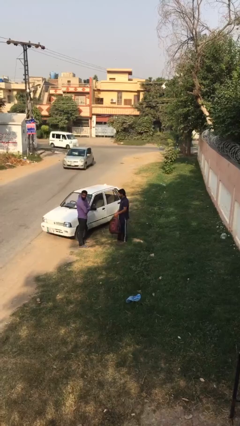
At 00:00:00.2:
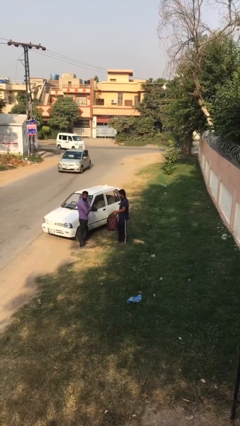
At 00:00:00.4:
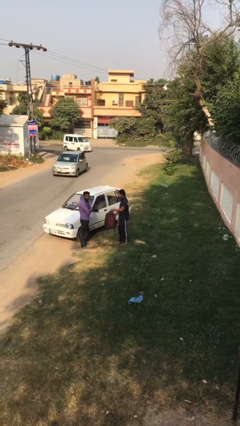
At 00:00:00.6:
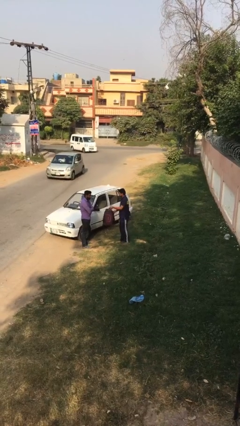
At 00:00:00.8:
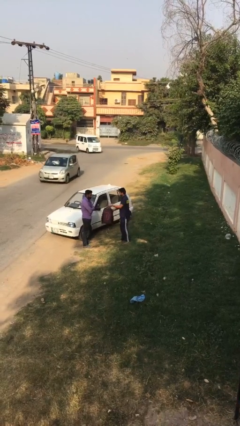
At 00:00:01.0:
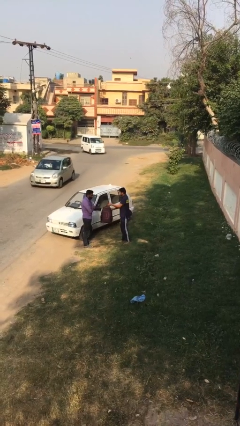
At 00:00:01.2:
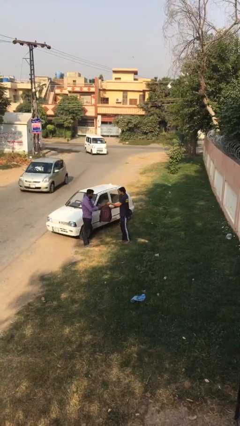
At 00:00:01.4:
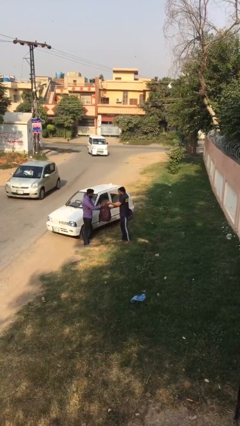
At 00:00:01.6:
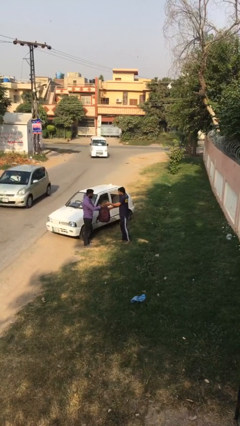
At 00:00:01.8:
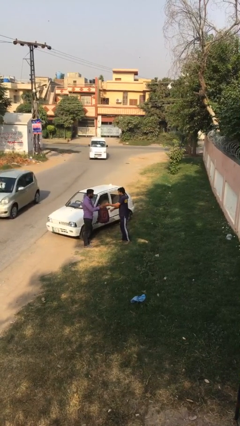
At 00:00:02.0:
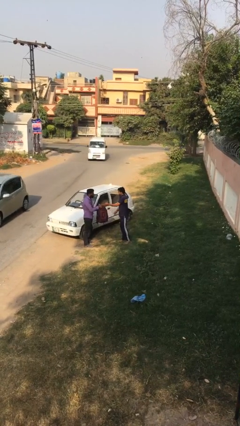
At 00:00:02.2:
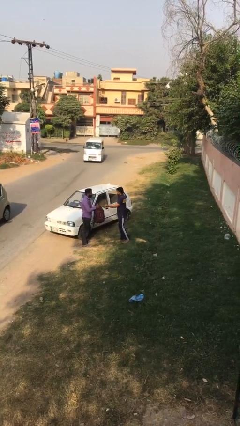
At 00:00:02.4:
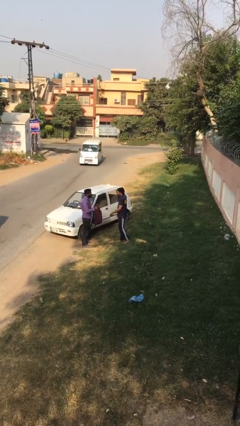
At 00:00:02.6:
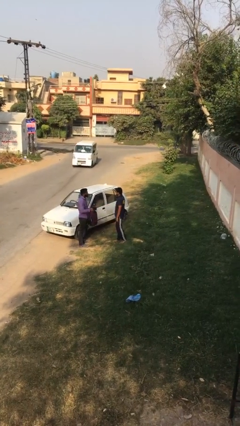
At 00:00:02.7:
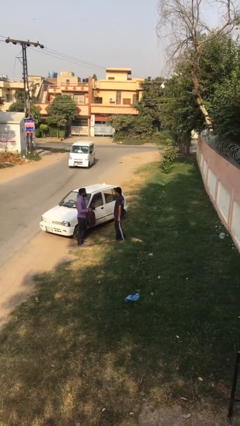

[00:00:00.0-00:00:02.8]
person transfers object to person

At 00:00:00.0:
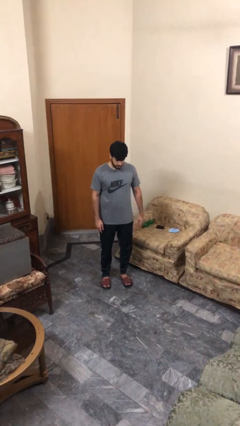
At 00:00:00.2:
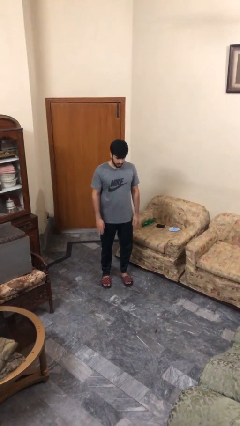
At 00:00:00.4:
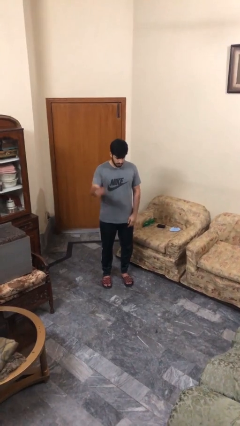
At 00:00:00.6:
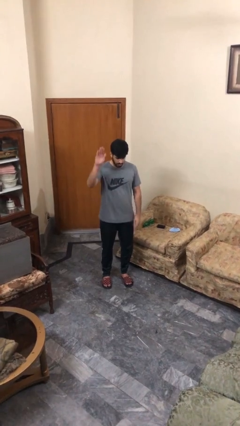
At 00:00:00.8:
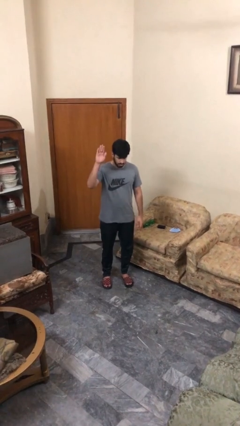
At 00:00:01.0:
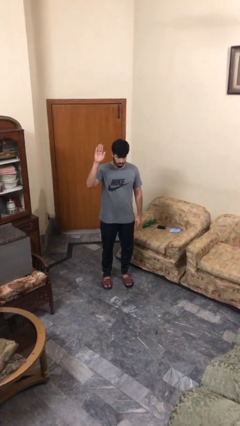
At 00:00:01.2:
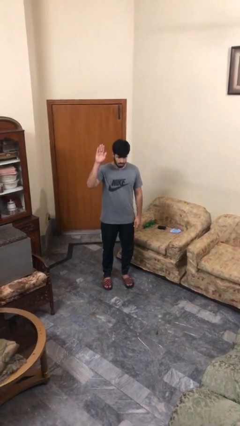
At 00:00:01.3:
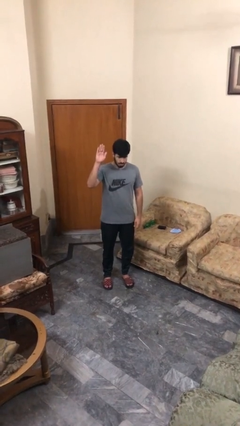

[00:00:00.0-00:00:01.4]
person gestures raise hand

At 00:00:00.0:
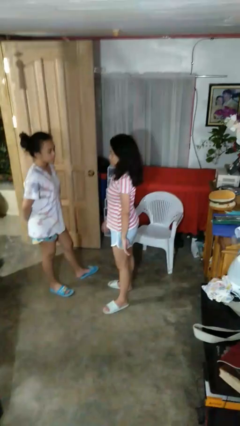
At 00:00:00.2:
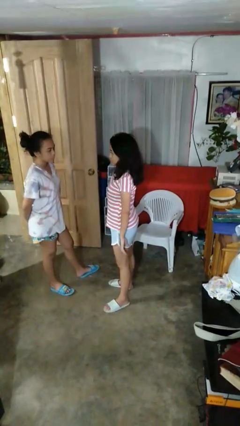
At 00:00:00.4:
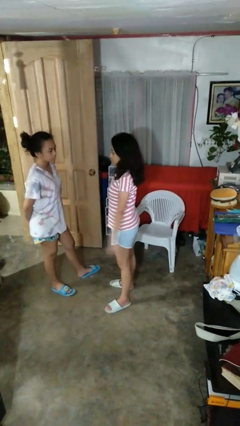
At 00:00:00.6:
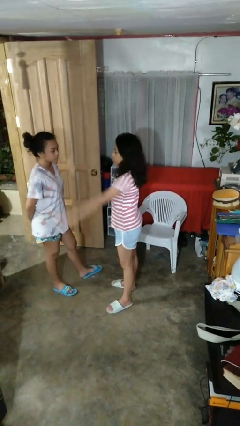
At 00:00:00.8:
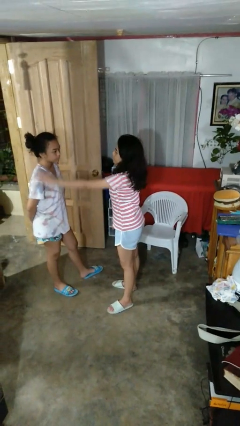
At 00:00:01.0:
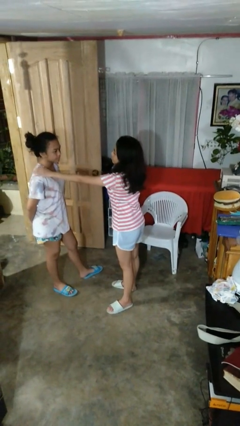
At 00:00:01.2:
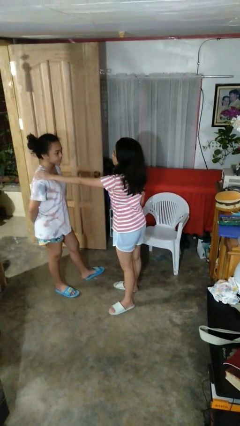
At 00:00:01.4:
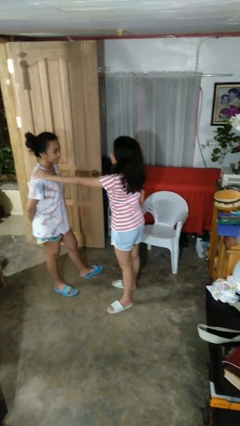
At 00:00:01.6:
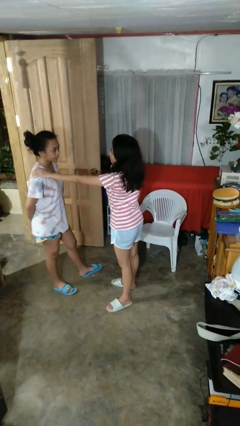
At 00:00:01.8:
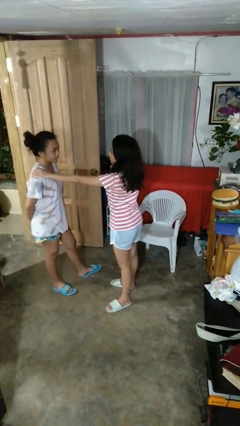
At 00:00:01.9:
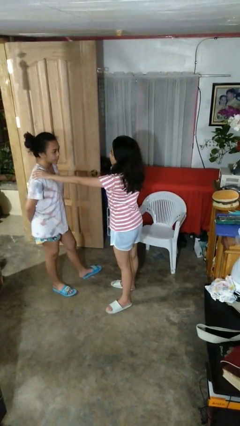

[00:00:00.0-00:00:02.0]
person pounds shoulders of person

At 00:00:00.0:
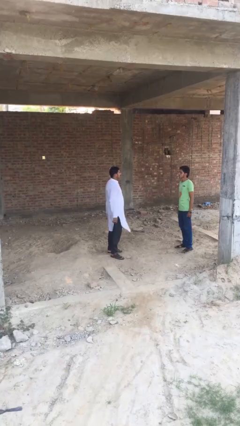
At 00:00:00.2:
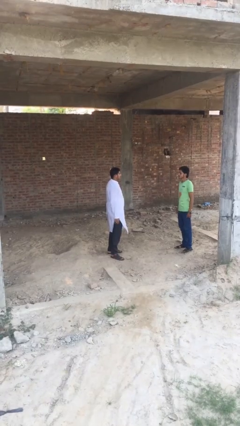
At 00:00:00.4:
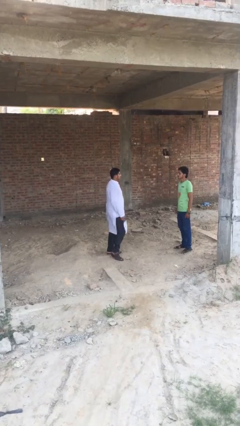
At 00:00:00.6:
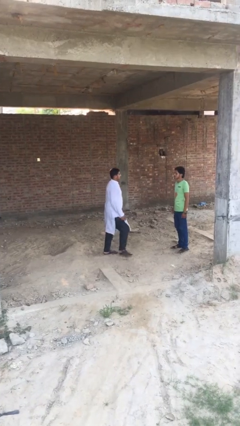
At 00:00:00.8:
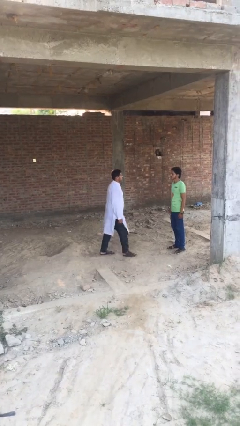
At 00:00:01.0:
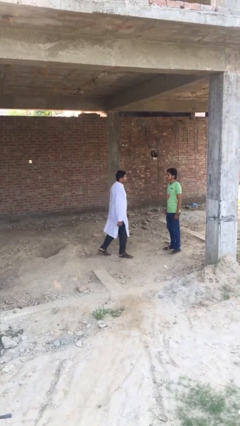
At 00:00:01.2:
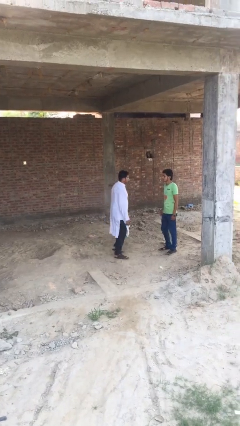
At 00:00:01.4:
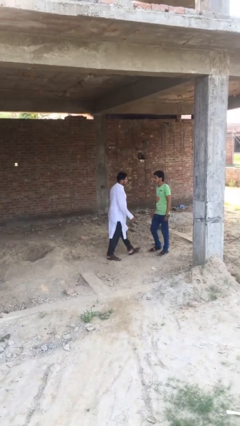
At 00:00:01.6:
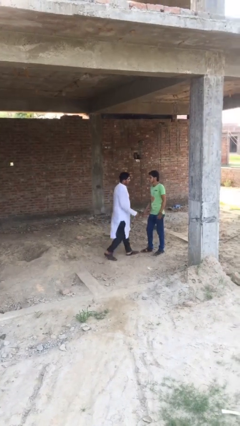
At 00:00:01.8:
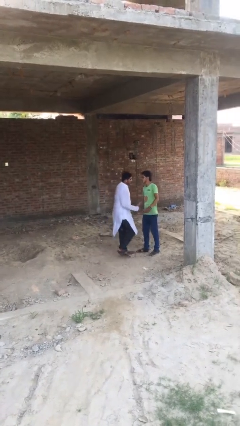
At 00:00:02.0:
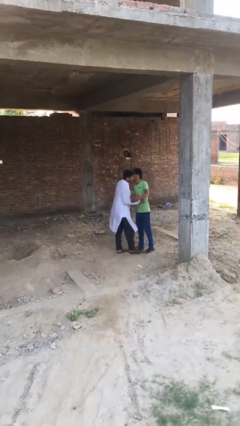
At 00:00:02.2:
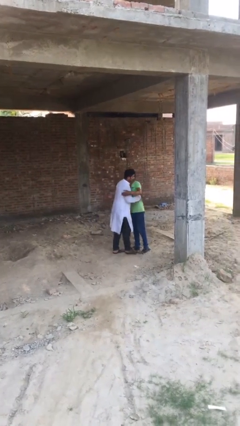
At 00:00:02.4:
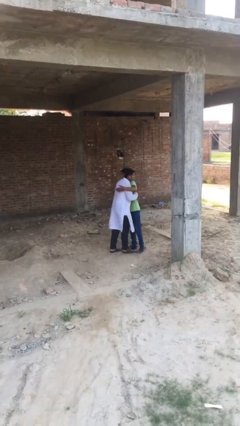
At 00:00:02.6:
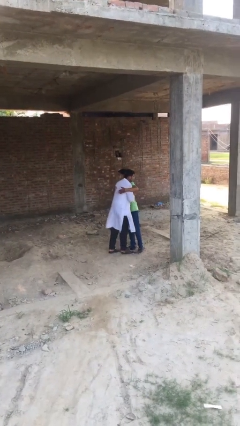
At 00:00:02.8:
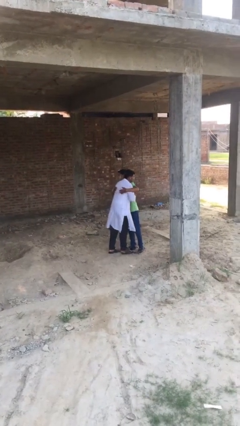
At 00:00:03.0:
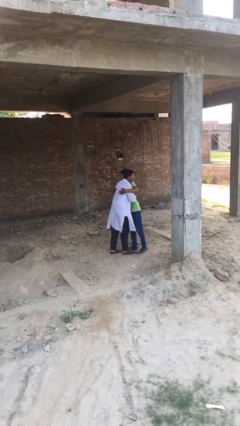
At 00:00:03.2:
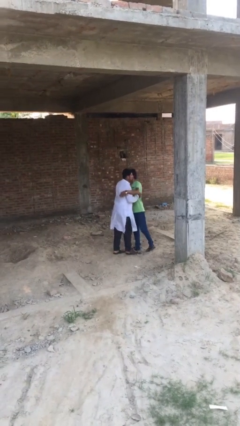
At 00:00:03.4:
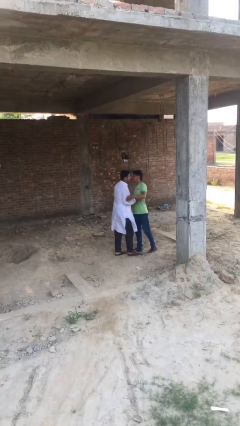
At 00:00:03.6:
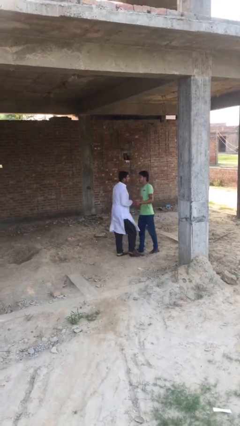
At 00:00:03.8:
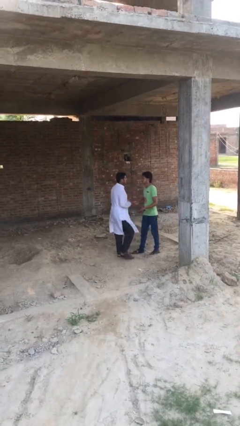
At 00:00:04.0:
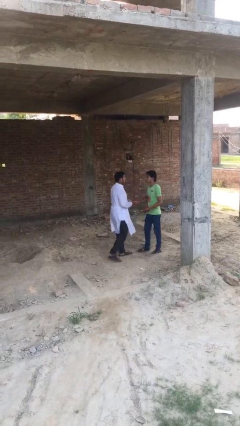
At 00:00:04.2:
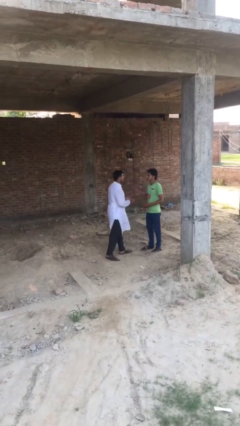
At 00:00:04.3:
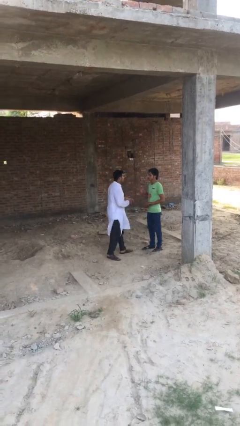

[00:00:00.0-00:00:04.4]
person embraces person

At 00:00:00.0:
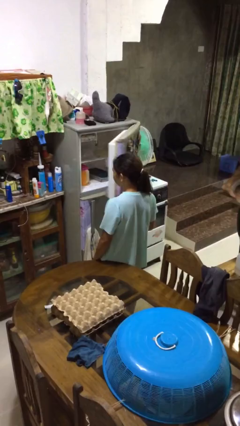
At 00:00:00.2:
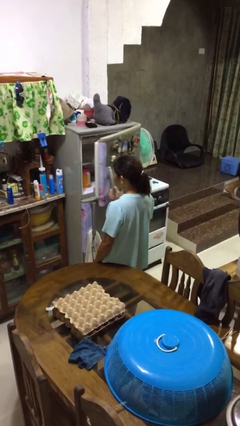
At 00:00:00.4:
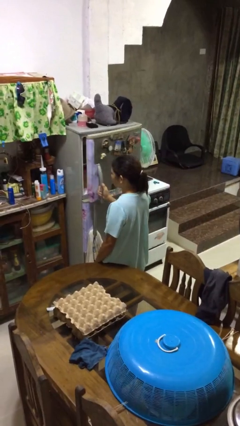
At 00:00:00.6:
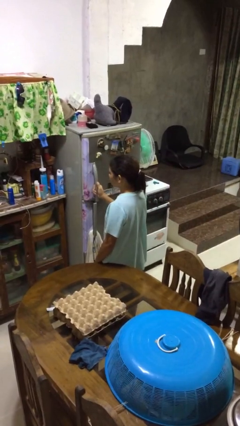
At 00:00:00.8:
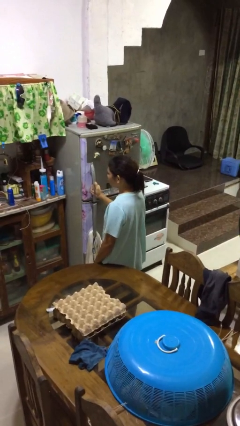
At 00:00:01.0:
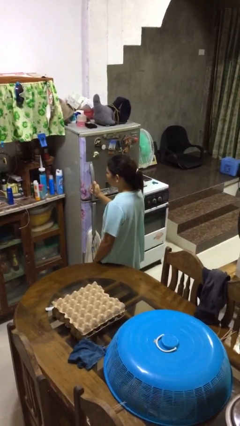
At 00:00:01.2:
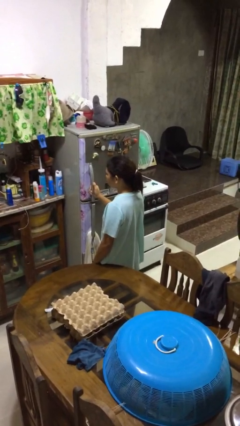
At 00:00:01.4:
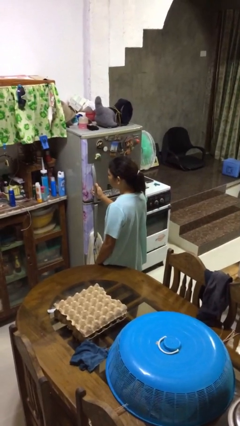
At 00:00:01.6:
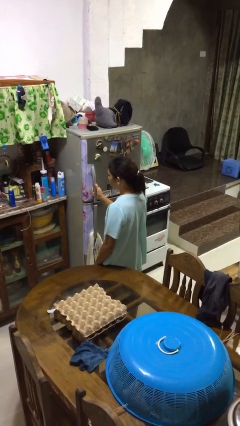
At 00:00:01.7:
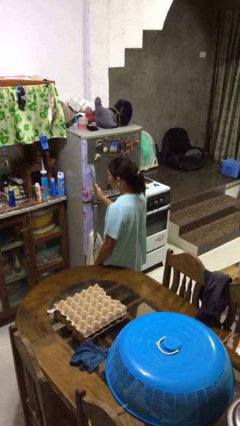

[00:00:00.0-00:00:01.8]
person closes refrigerator

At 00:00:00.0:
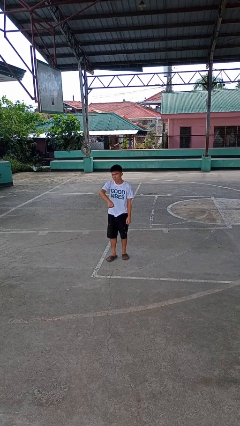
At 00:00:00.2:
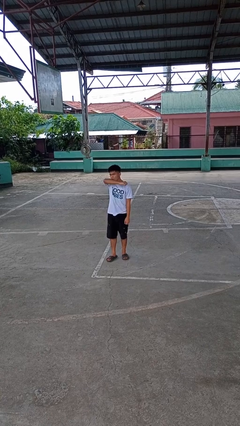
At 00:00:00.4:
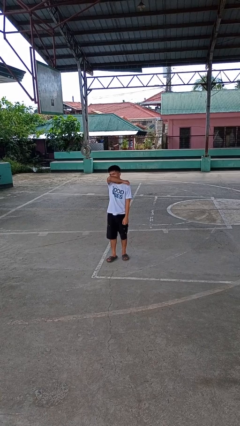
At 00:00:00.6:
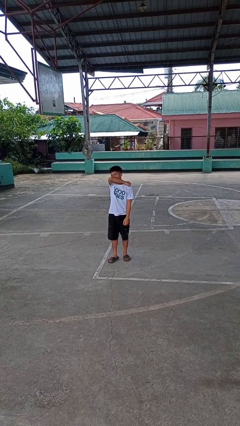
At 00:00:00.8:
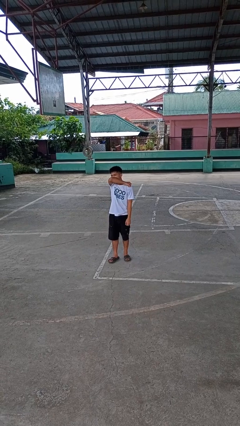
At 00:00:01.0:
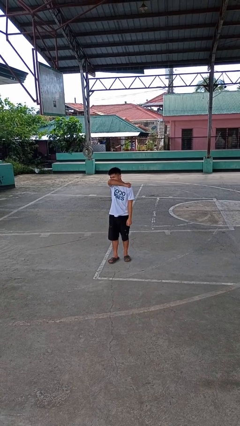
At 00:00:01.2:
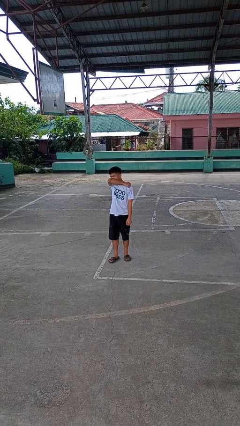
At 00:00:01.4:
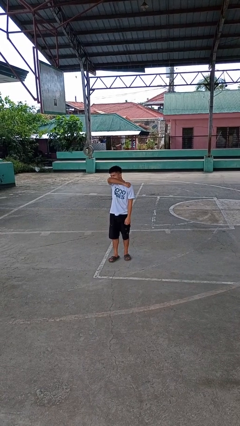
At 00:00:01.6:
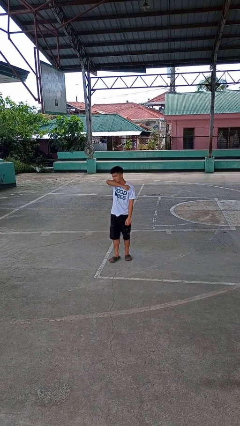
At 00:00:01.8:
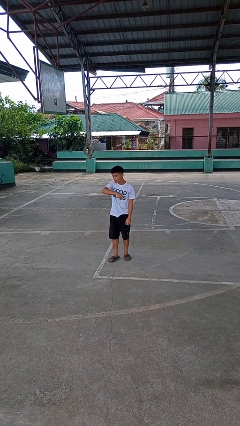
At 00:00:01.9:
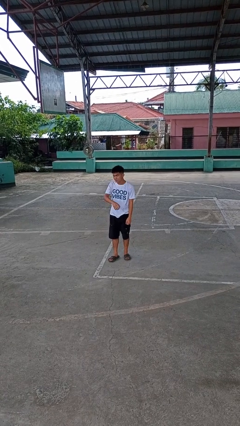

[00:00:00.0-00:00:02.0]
person sneezes into arm

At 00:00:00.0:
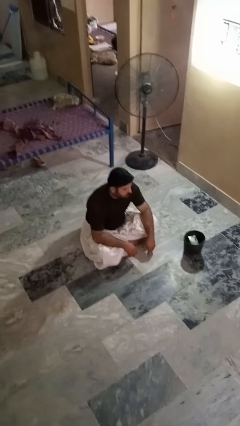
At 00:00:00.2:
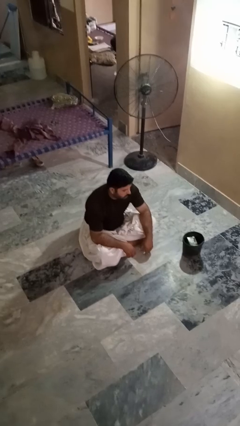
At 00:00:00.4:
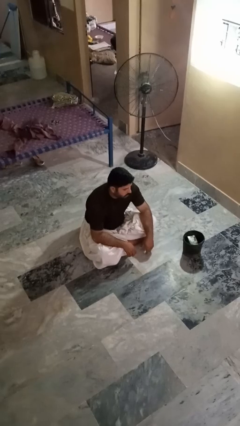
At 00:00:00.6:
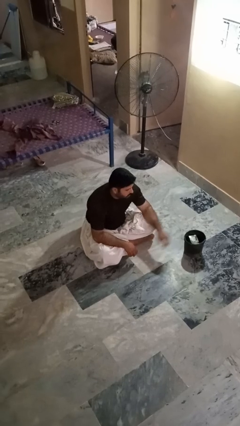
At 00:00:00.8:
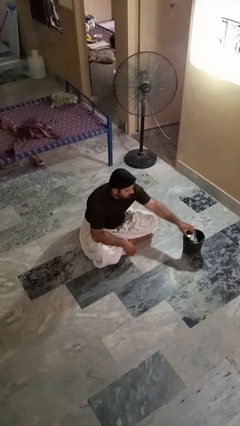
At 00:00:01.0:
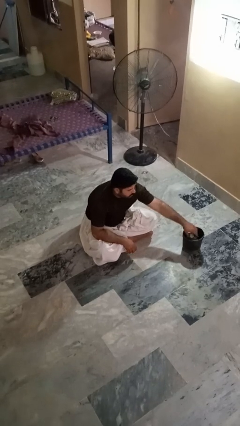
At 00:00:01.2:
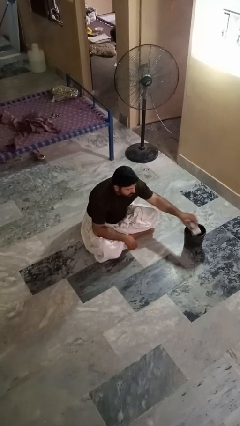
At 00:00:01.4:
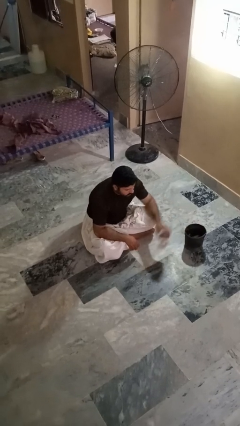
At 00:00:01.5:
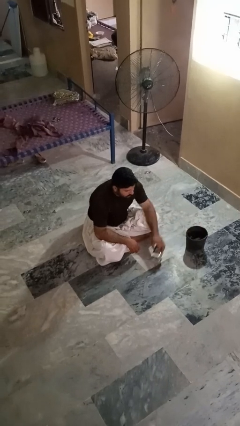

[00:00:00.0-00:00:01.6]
person takes object from basket

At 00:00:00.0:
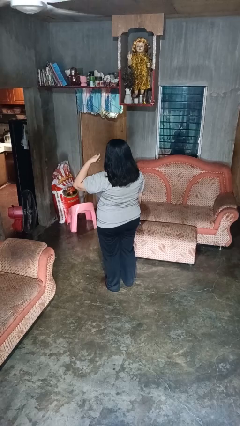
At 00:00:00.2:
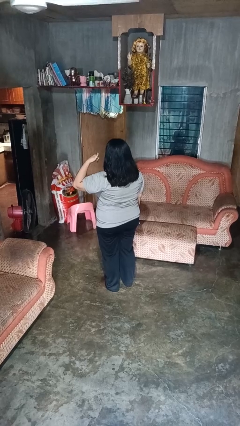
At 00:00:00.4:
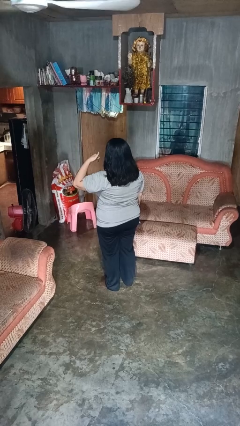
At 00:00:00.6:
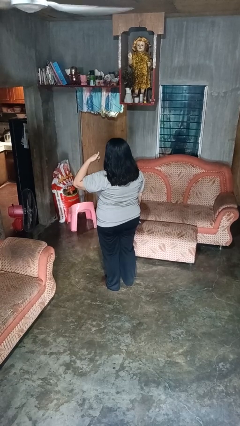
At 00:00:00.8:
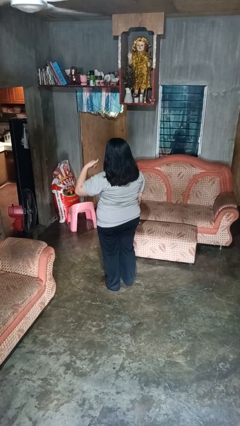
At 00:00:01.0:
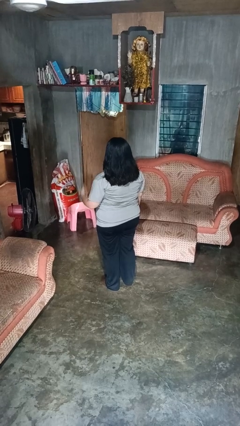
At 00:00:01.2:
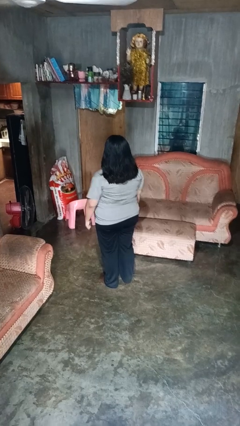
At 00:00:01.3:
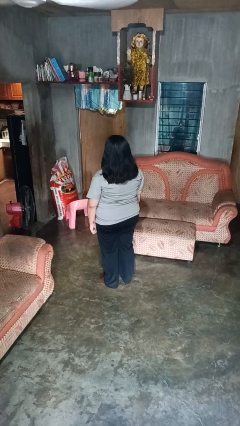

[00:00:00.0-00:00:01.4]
person gestures call me
